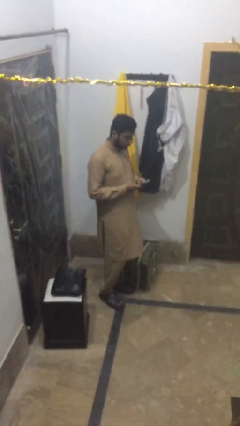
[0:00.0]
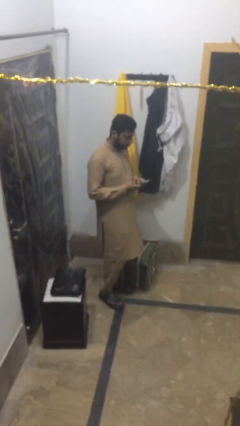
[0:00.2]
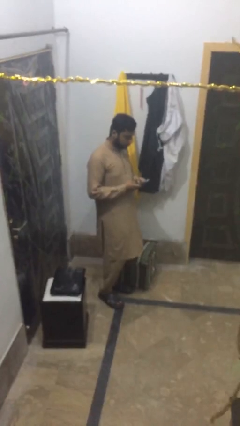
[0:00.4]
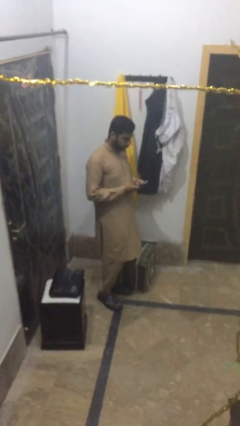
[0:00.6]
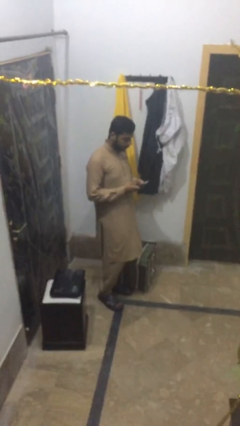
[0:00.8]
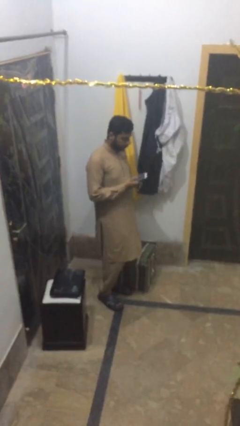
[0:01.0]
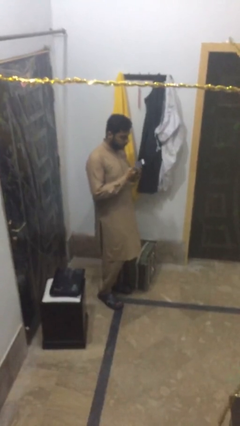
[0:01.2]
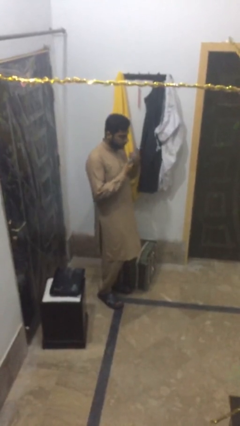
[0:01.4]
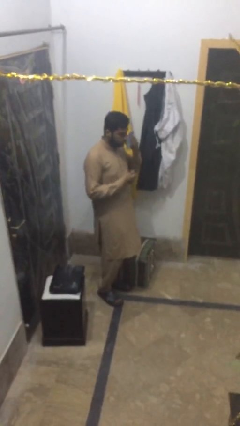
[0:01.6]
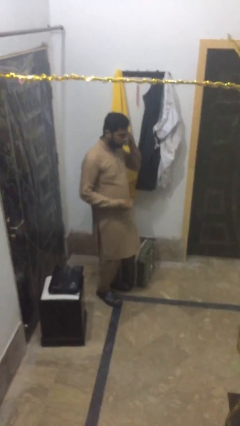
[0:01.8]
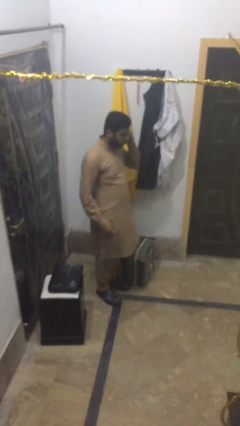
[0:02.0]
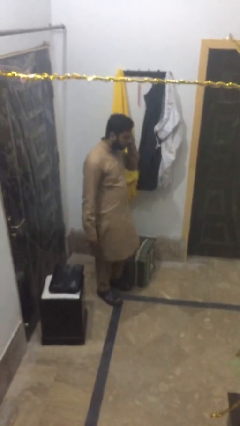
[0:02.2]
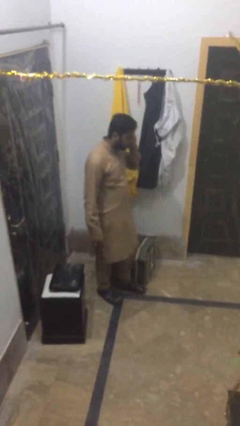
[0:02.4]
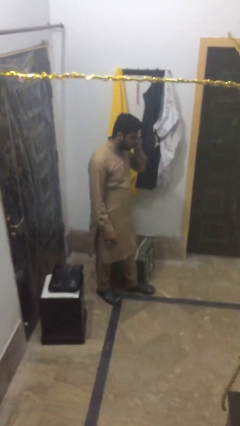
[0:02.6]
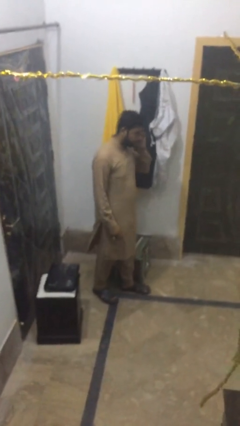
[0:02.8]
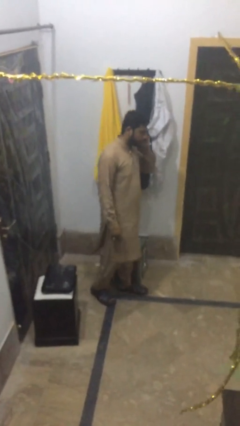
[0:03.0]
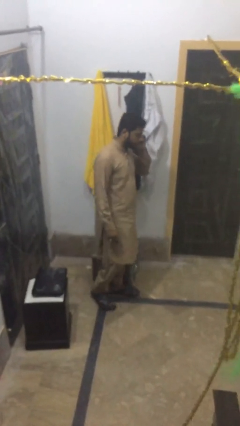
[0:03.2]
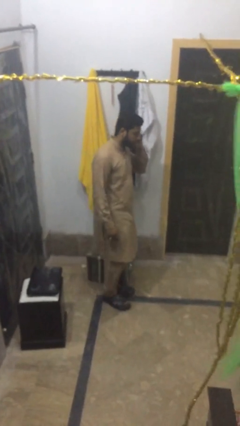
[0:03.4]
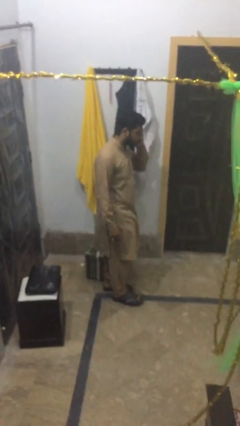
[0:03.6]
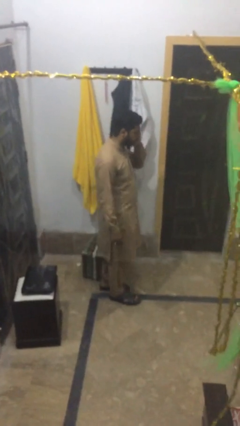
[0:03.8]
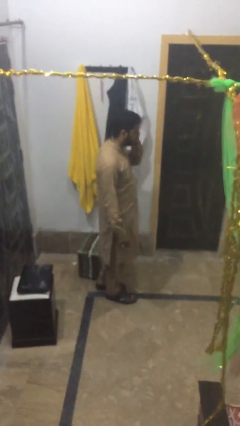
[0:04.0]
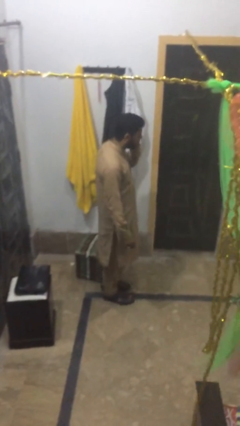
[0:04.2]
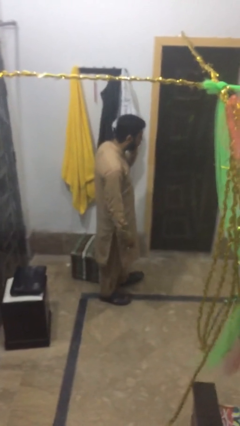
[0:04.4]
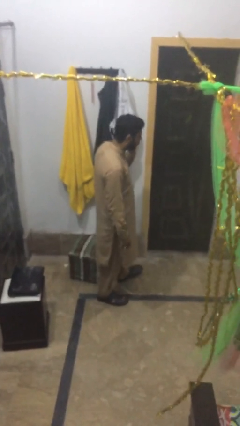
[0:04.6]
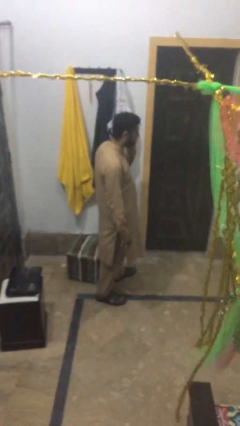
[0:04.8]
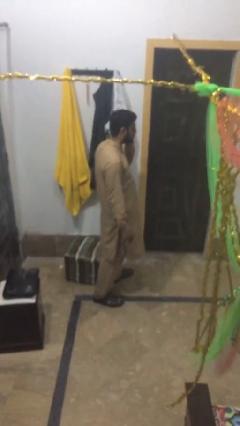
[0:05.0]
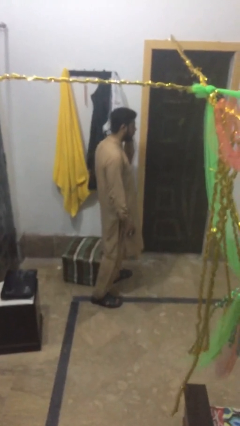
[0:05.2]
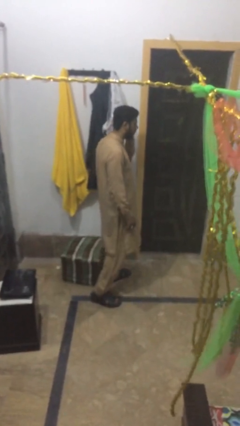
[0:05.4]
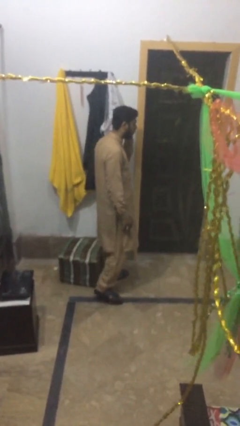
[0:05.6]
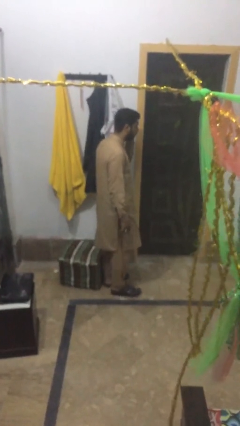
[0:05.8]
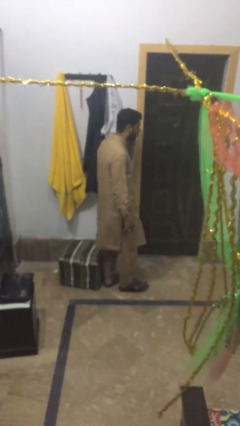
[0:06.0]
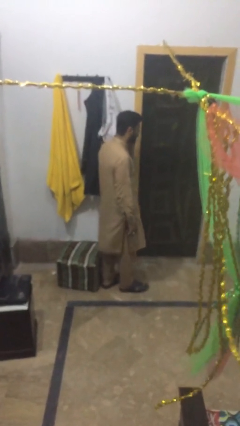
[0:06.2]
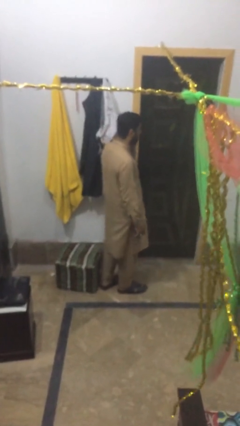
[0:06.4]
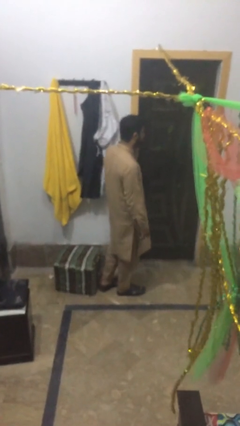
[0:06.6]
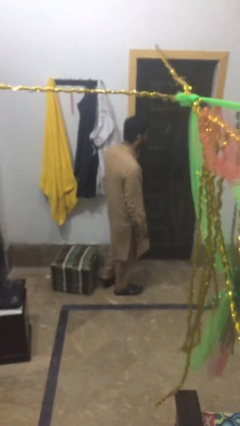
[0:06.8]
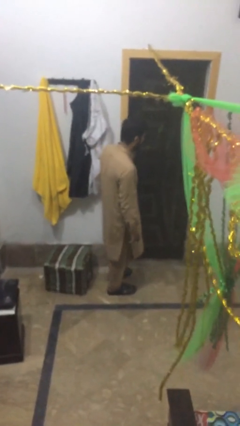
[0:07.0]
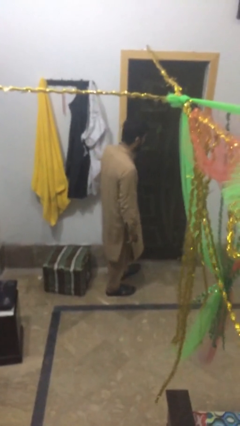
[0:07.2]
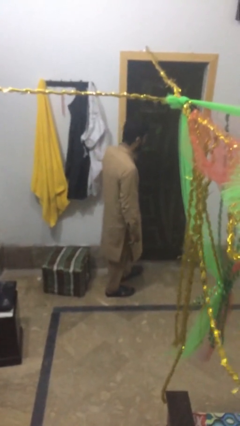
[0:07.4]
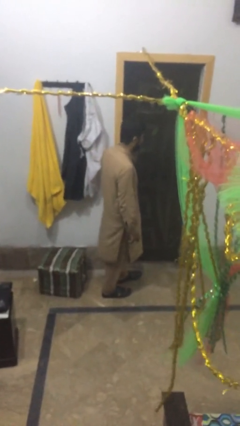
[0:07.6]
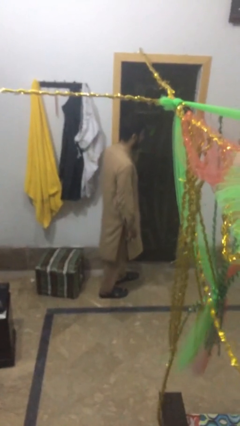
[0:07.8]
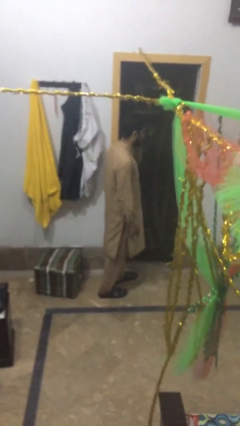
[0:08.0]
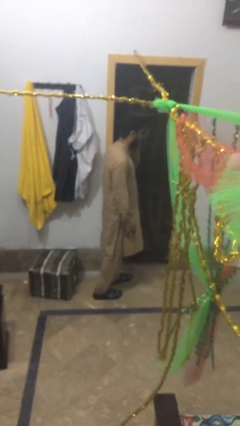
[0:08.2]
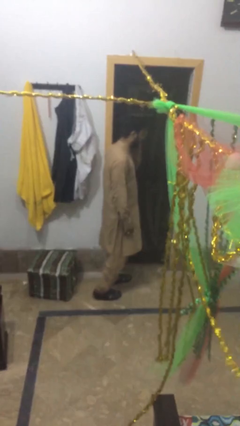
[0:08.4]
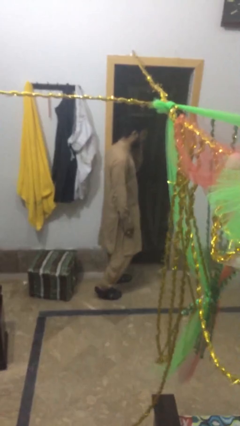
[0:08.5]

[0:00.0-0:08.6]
person talks on phone

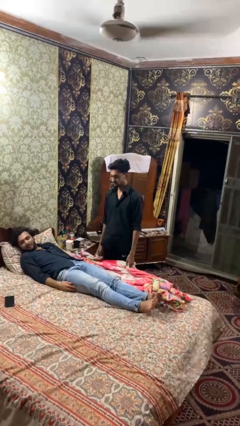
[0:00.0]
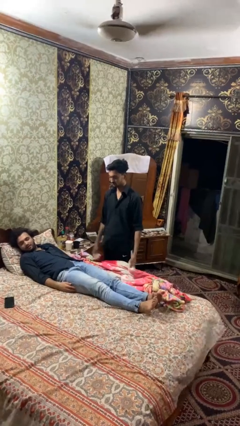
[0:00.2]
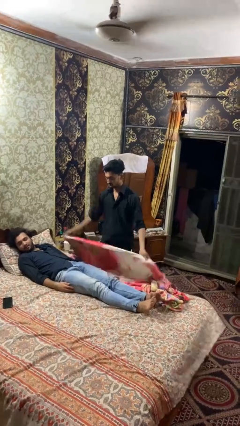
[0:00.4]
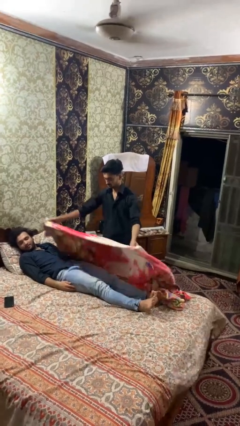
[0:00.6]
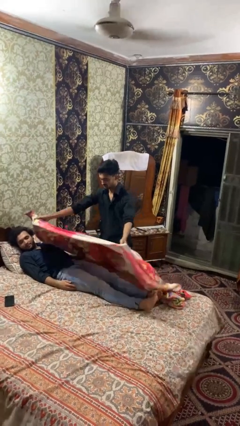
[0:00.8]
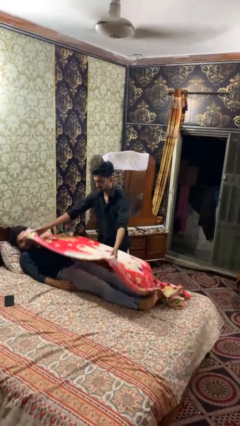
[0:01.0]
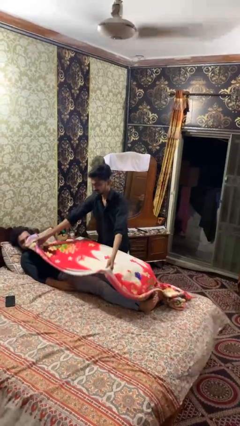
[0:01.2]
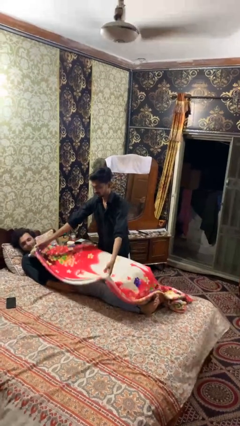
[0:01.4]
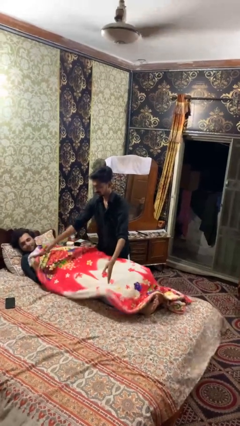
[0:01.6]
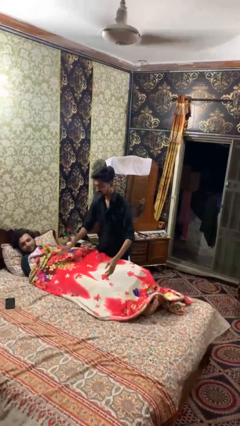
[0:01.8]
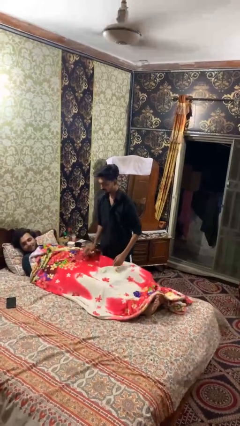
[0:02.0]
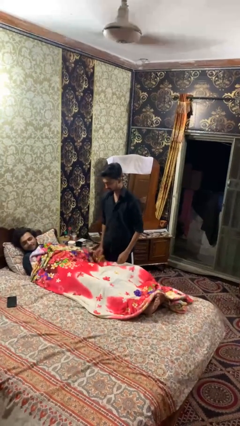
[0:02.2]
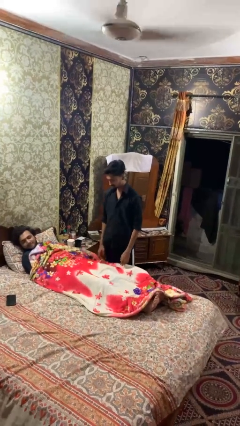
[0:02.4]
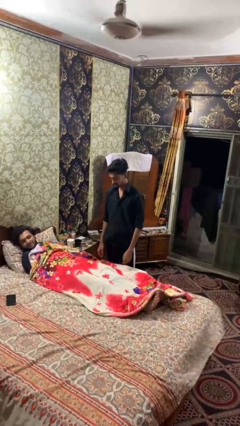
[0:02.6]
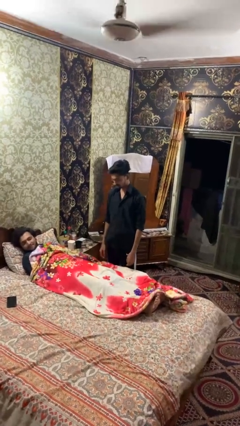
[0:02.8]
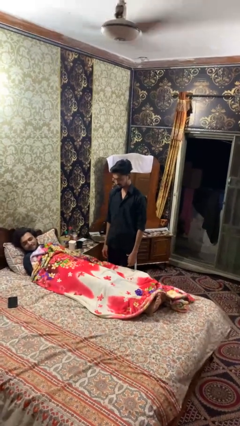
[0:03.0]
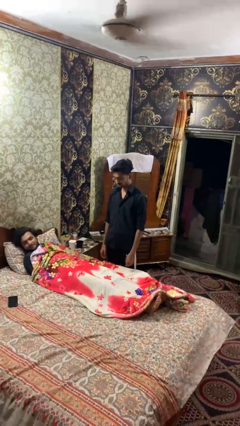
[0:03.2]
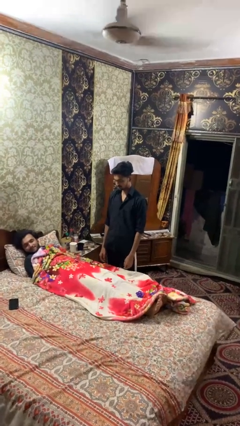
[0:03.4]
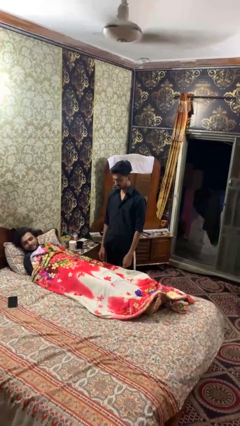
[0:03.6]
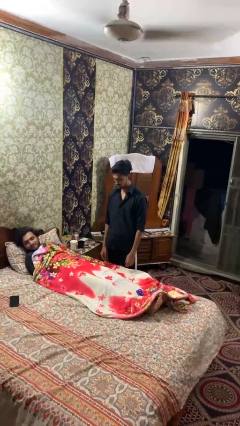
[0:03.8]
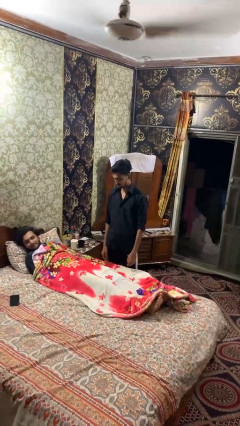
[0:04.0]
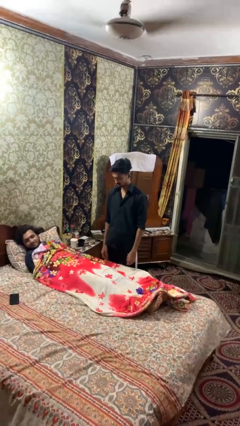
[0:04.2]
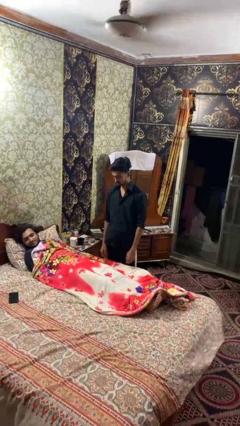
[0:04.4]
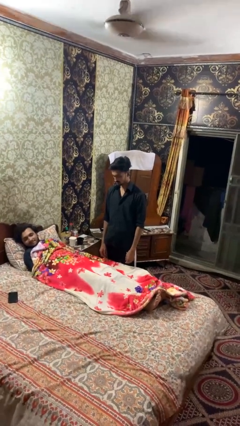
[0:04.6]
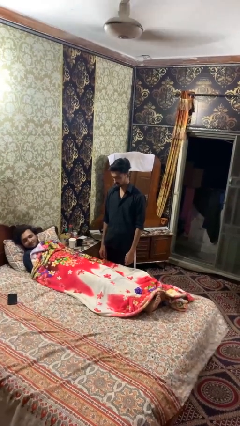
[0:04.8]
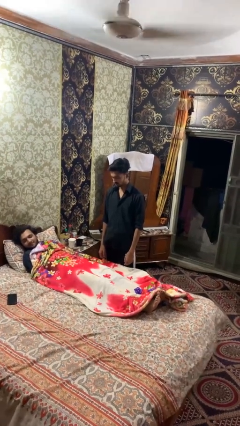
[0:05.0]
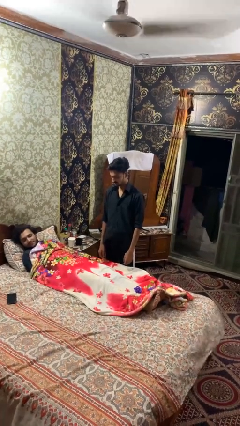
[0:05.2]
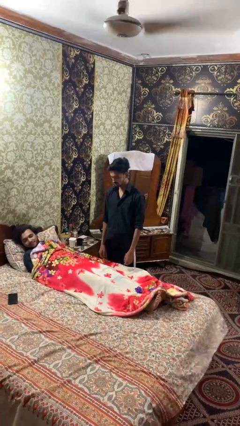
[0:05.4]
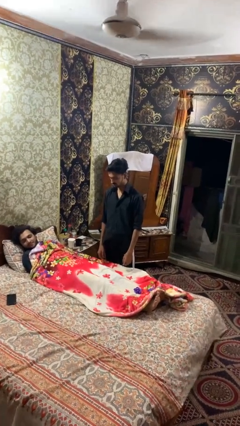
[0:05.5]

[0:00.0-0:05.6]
person covers friend with blanket

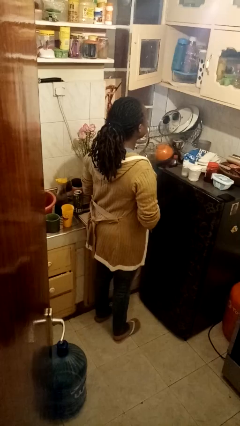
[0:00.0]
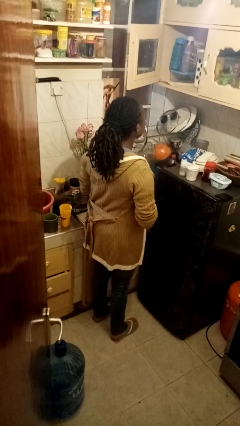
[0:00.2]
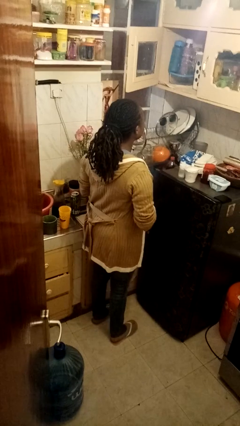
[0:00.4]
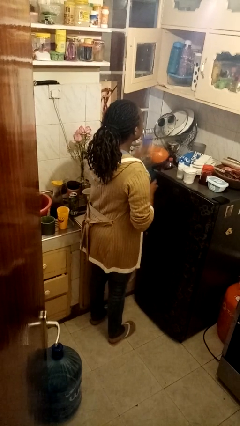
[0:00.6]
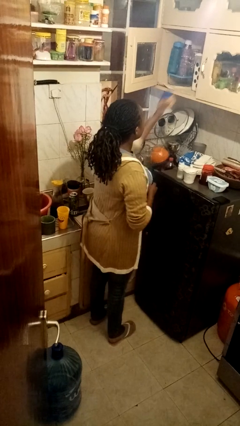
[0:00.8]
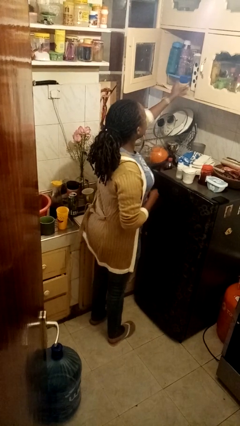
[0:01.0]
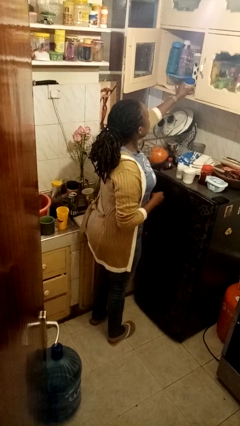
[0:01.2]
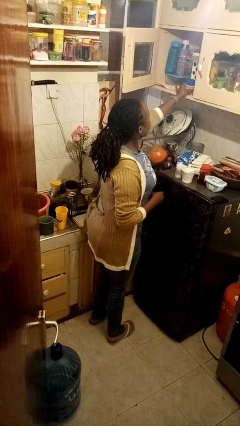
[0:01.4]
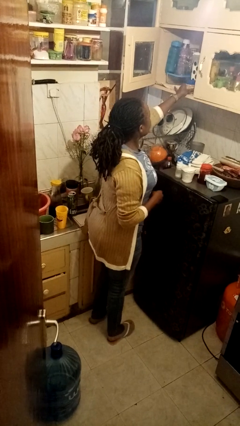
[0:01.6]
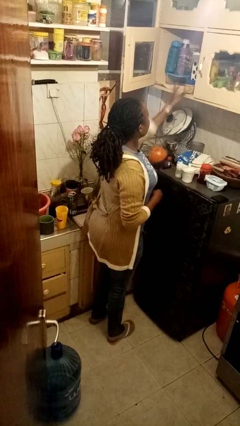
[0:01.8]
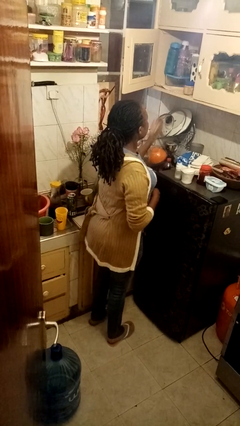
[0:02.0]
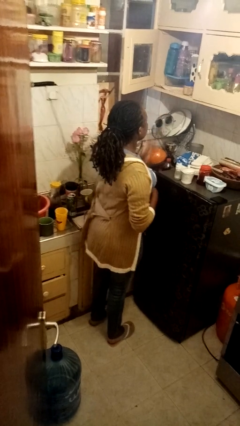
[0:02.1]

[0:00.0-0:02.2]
person puts down object into cabinet

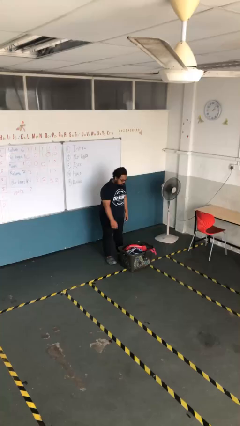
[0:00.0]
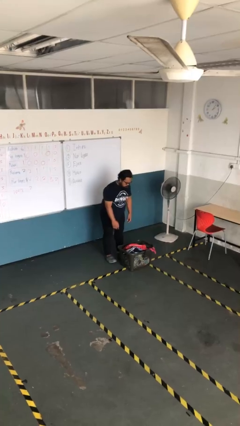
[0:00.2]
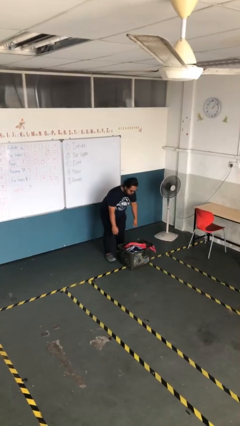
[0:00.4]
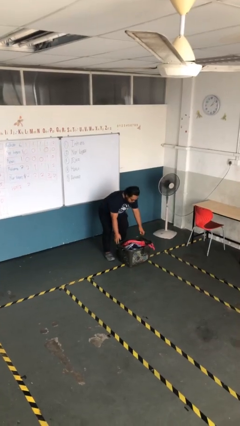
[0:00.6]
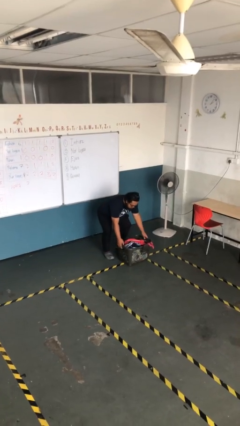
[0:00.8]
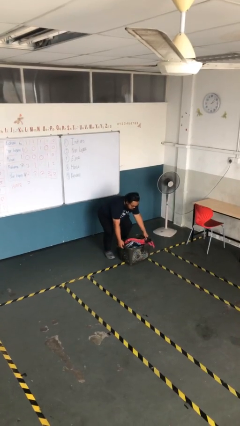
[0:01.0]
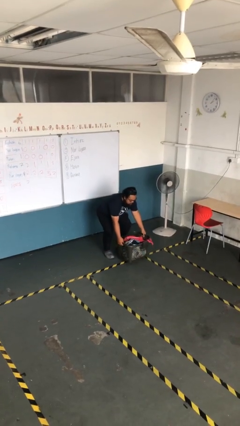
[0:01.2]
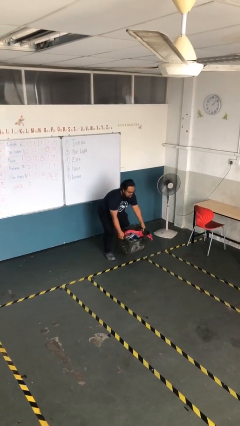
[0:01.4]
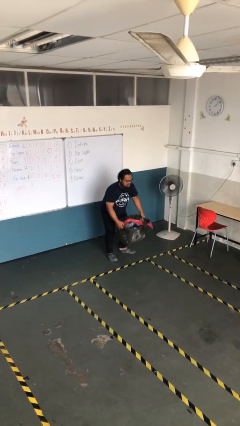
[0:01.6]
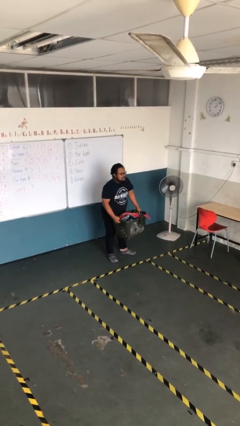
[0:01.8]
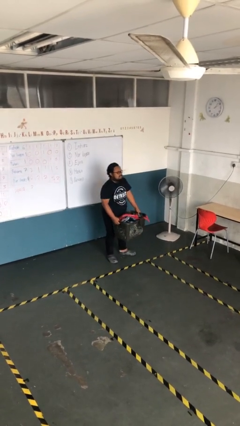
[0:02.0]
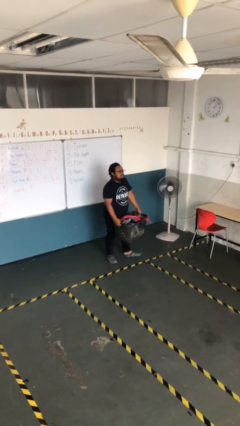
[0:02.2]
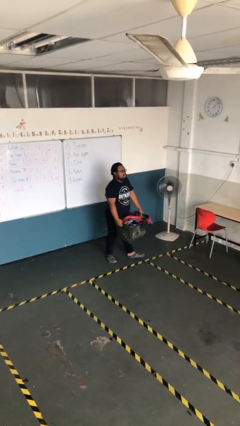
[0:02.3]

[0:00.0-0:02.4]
person picks up object from floor
